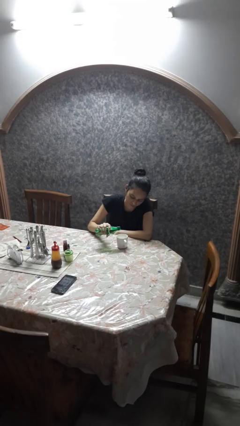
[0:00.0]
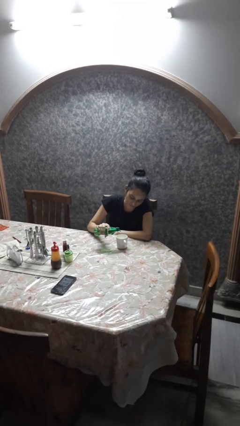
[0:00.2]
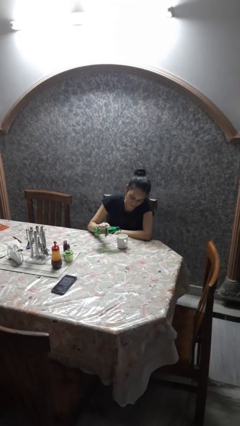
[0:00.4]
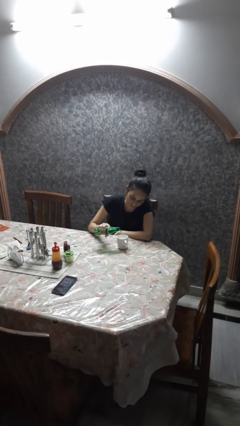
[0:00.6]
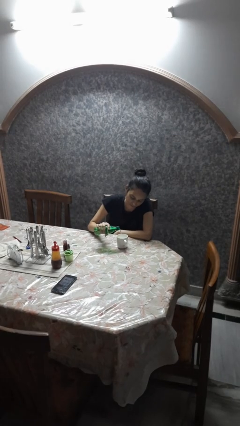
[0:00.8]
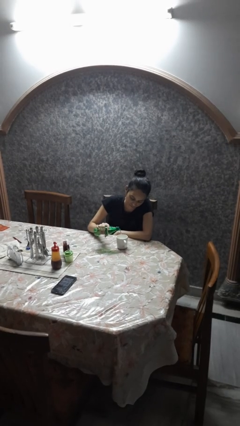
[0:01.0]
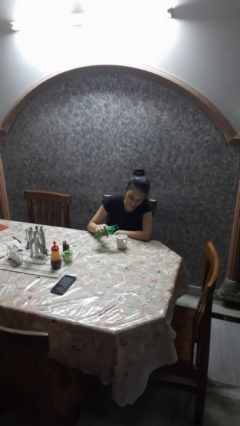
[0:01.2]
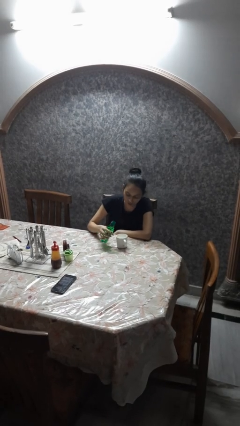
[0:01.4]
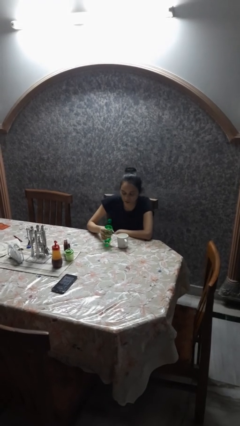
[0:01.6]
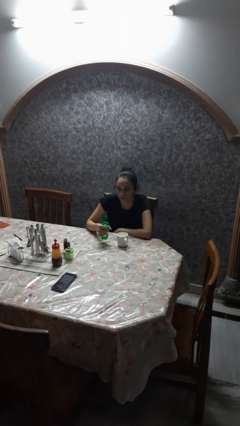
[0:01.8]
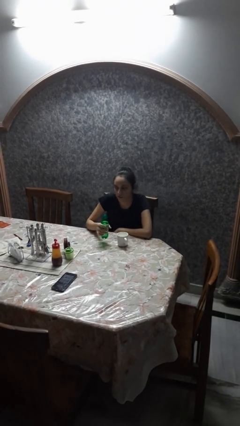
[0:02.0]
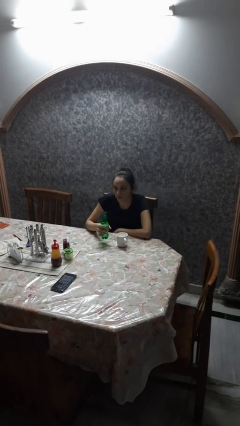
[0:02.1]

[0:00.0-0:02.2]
person pours liquid into cup

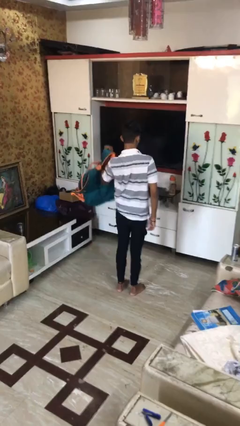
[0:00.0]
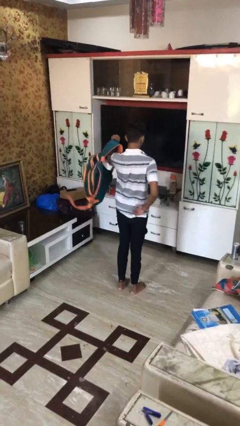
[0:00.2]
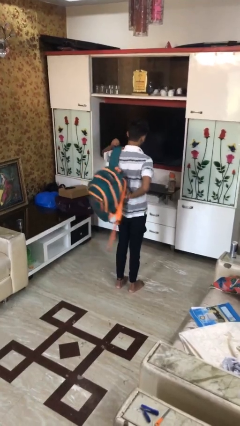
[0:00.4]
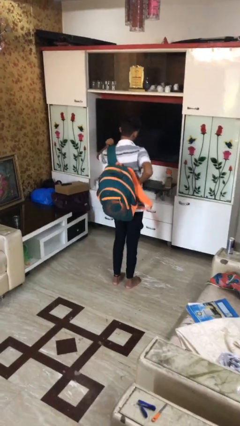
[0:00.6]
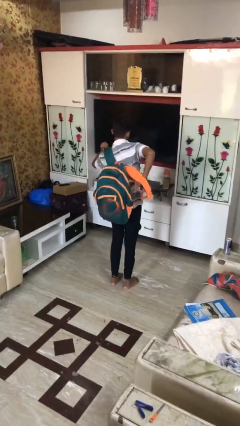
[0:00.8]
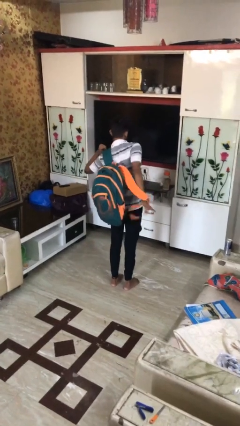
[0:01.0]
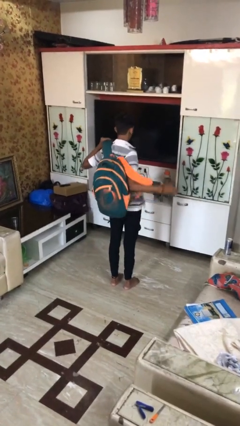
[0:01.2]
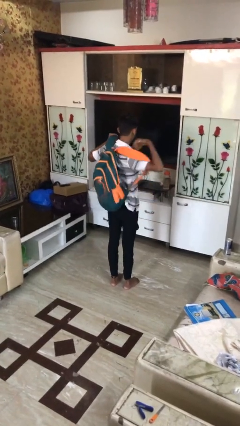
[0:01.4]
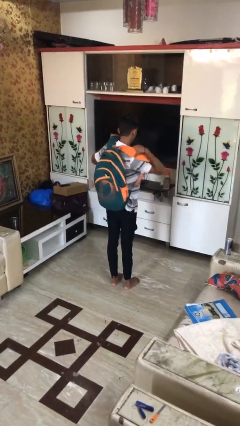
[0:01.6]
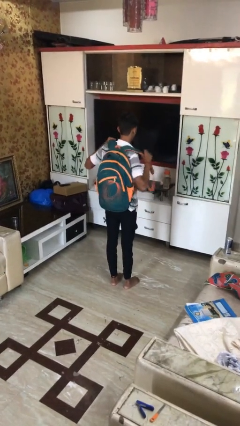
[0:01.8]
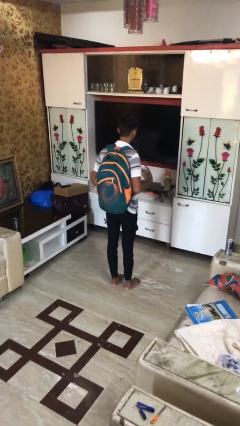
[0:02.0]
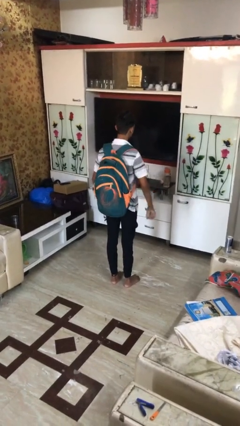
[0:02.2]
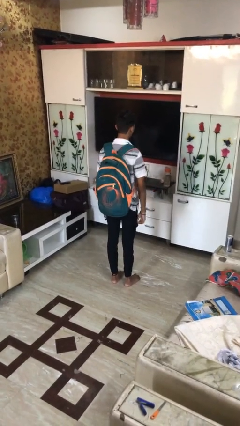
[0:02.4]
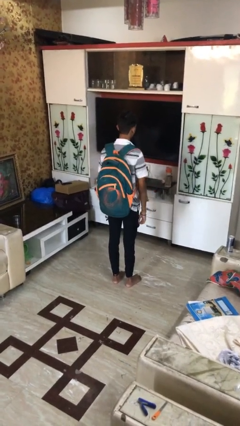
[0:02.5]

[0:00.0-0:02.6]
person puts on backpack

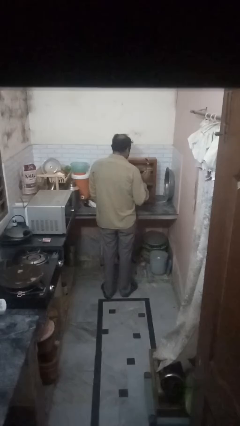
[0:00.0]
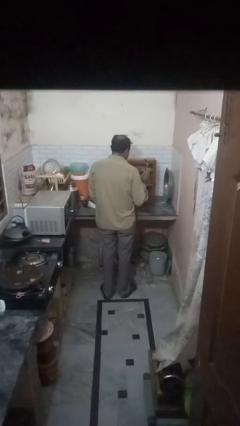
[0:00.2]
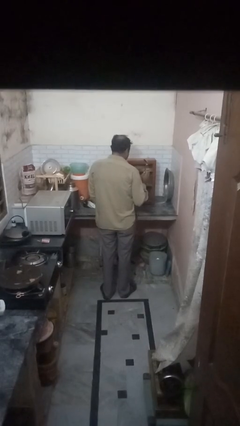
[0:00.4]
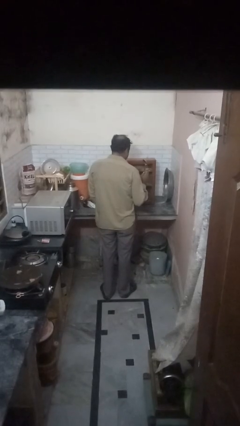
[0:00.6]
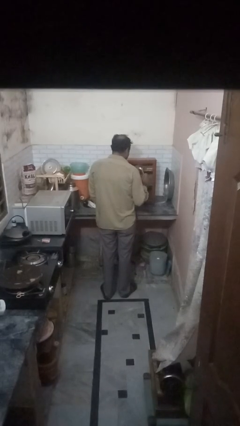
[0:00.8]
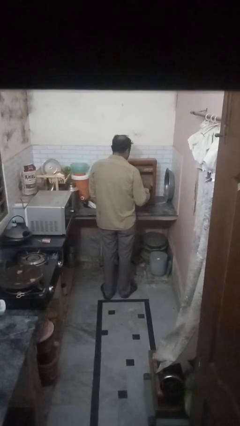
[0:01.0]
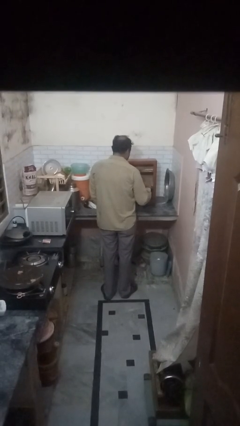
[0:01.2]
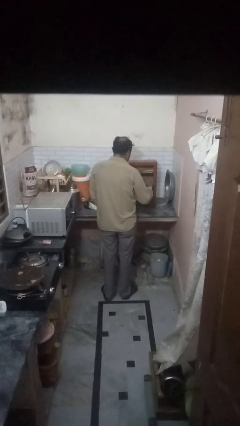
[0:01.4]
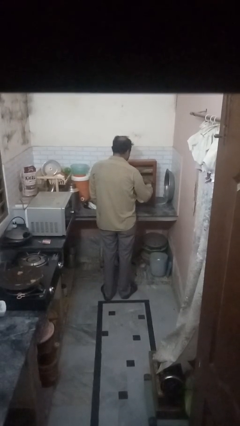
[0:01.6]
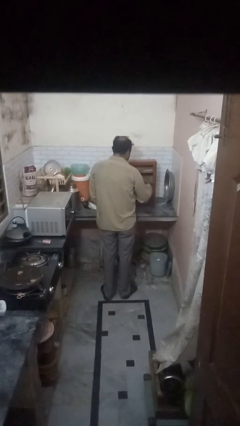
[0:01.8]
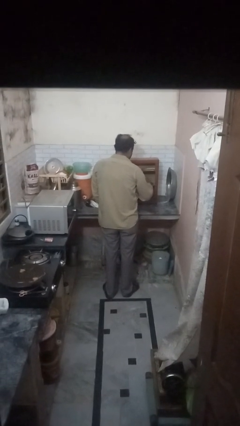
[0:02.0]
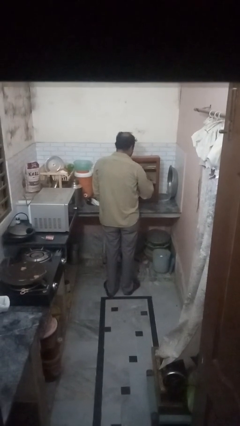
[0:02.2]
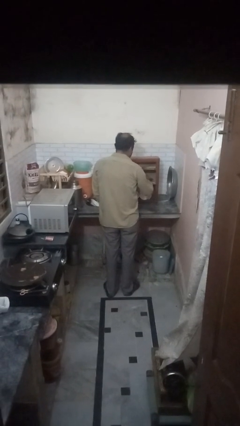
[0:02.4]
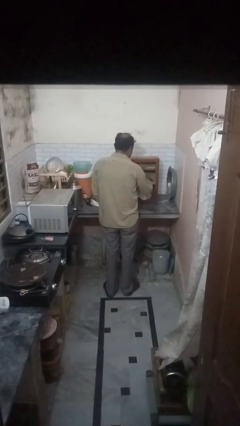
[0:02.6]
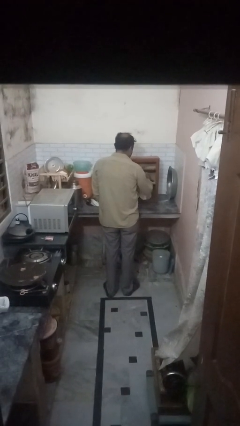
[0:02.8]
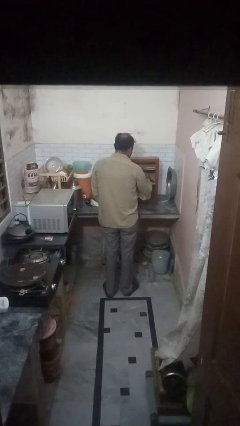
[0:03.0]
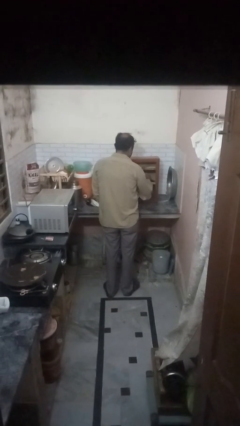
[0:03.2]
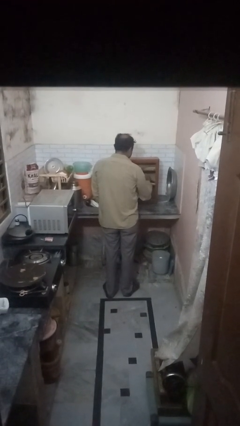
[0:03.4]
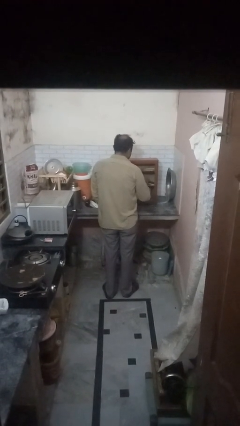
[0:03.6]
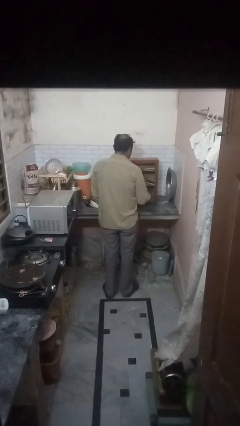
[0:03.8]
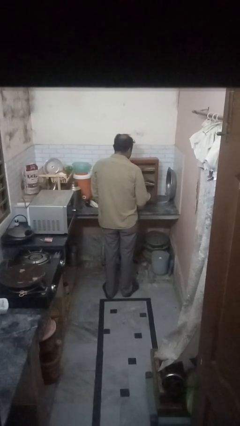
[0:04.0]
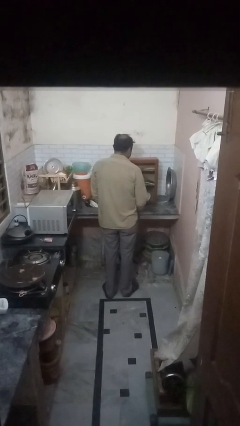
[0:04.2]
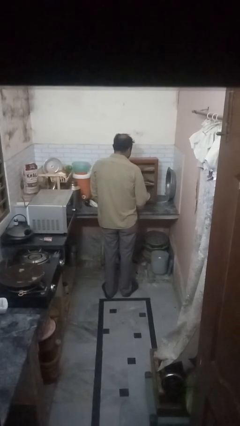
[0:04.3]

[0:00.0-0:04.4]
person takes object from cabinet

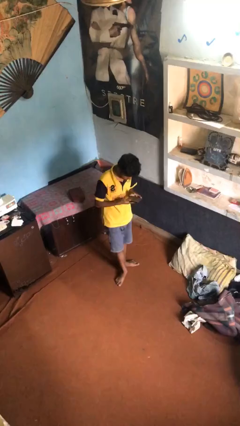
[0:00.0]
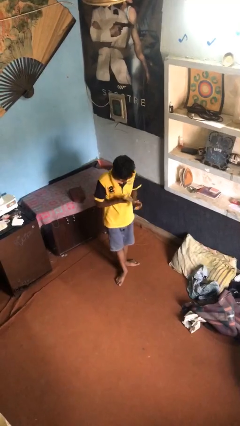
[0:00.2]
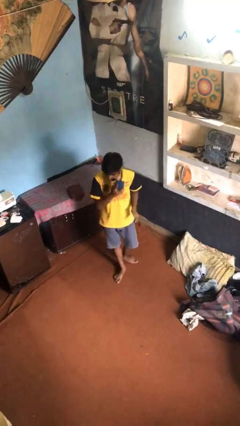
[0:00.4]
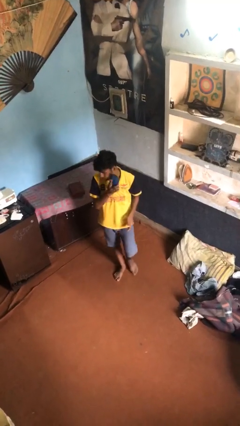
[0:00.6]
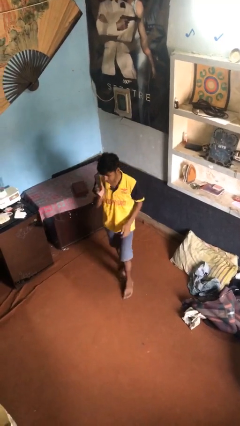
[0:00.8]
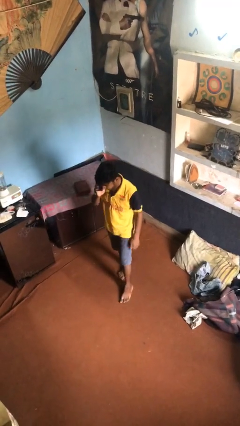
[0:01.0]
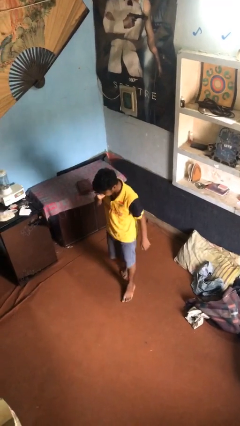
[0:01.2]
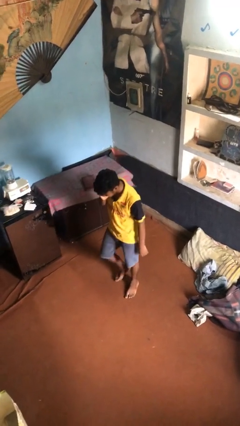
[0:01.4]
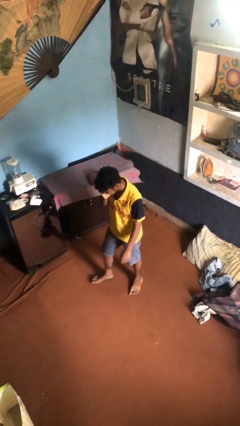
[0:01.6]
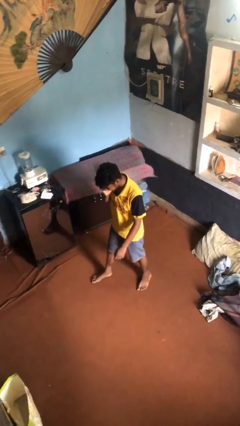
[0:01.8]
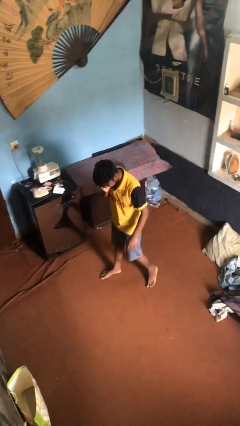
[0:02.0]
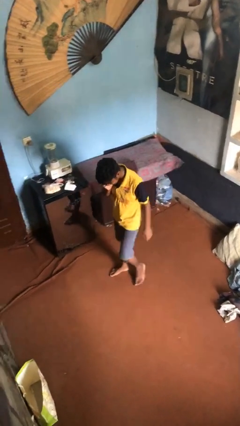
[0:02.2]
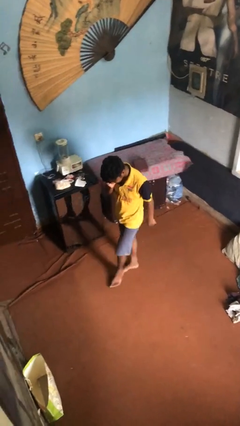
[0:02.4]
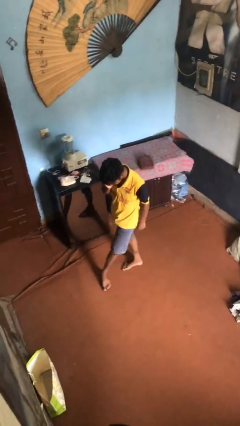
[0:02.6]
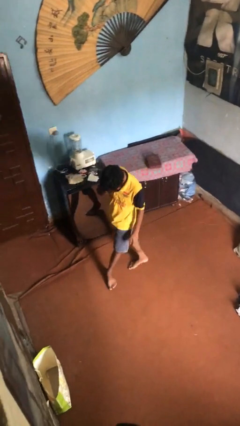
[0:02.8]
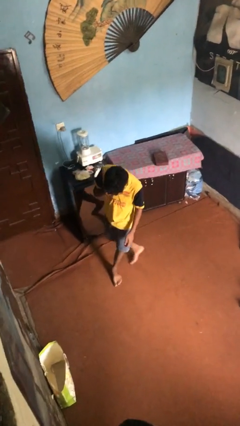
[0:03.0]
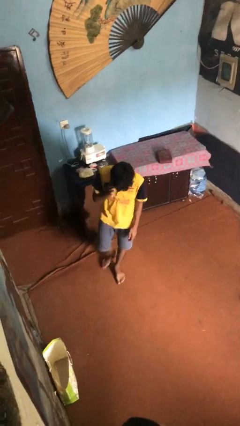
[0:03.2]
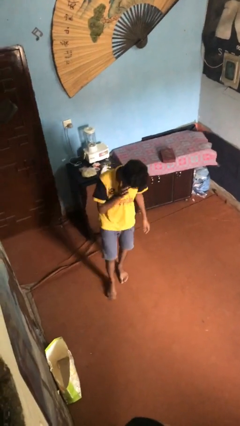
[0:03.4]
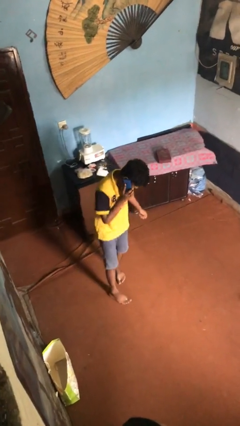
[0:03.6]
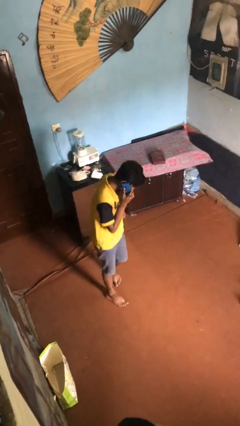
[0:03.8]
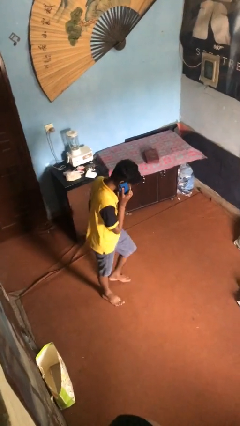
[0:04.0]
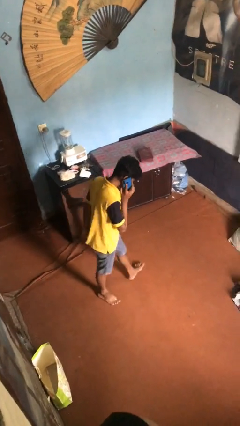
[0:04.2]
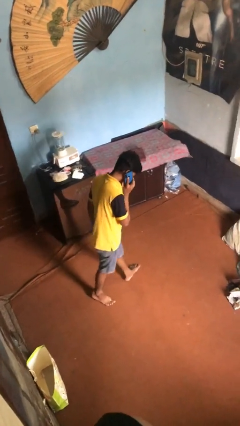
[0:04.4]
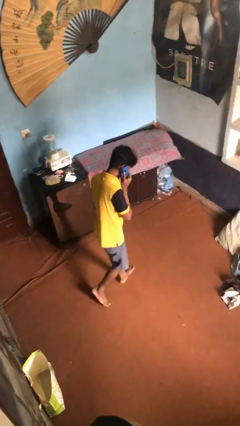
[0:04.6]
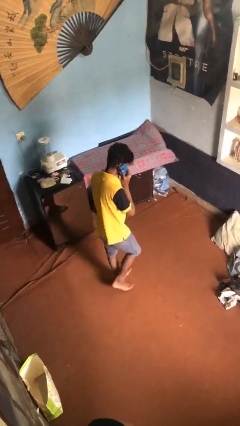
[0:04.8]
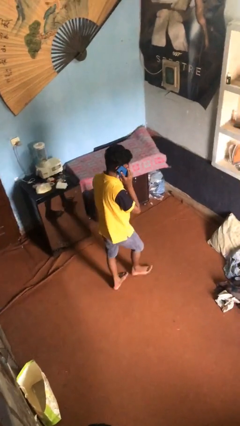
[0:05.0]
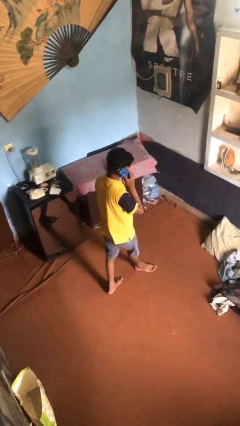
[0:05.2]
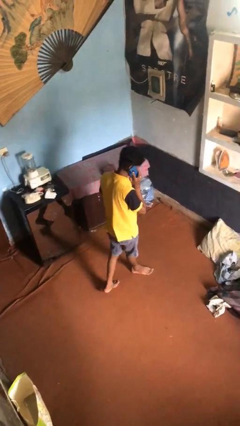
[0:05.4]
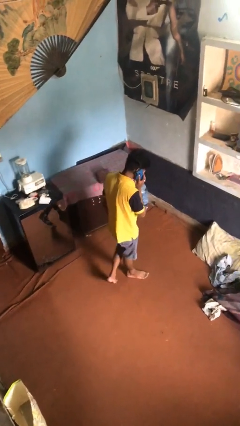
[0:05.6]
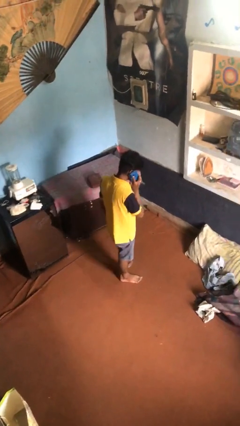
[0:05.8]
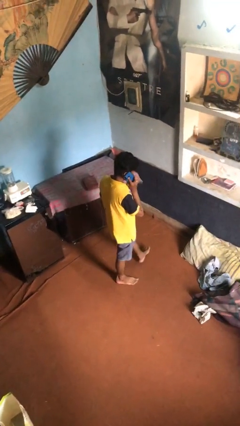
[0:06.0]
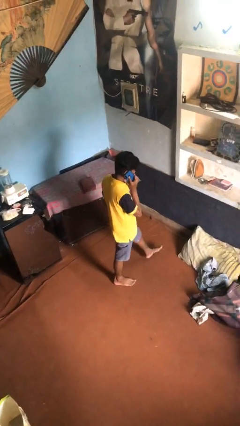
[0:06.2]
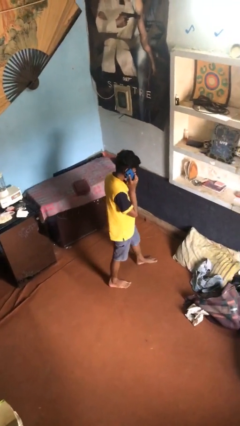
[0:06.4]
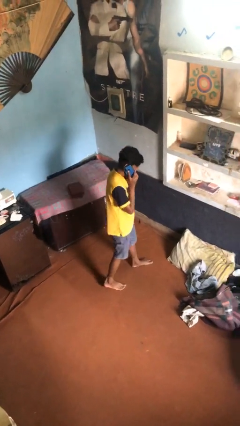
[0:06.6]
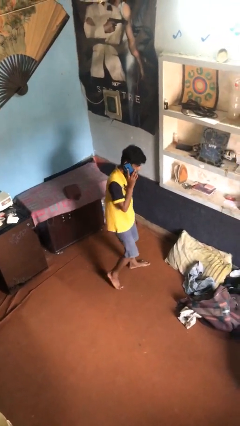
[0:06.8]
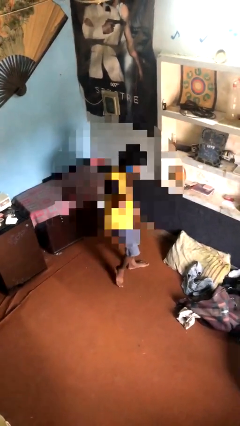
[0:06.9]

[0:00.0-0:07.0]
person talks on phone

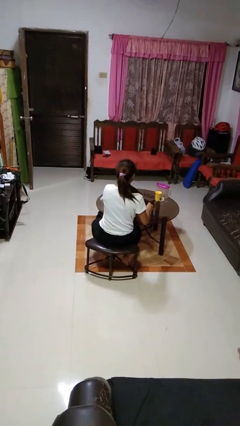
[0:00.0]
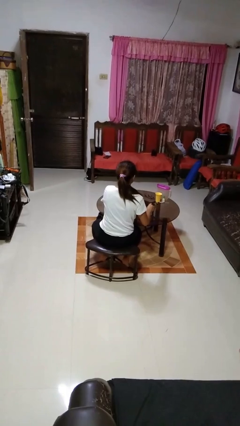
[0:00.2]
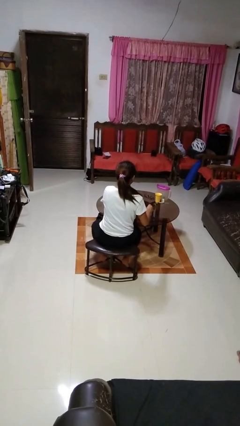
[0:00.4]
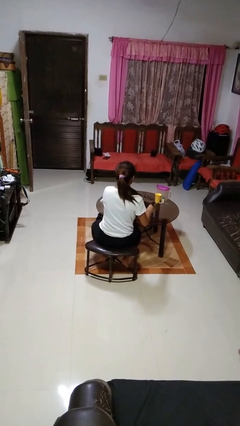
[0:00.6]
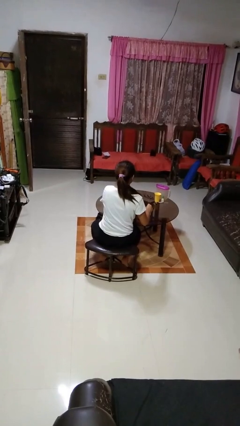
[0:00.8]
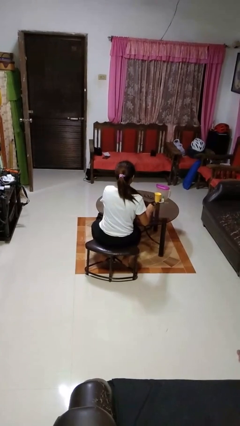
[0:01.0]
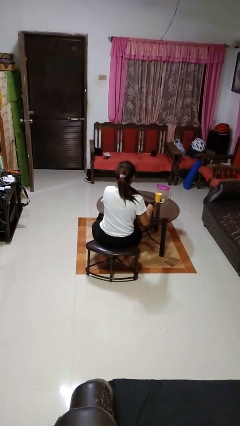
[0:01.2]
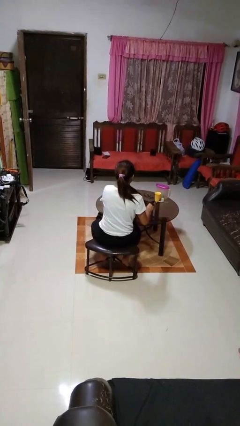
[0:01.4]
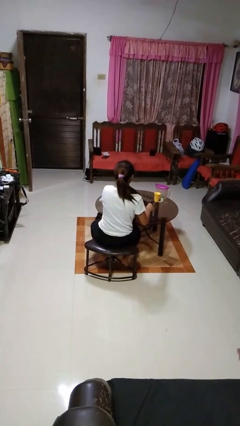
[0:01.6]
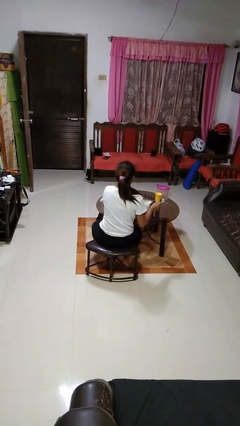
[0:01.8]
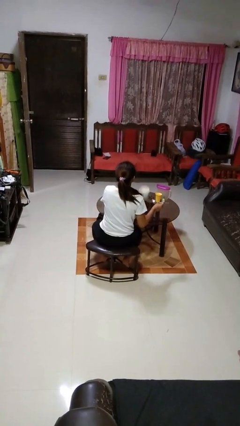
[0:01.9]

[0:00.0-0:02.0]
person stirs mug
